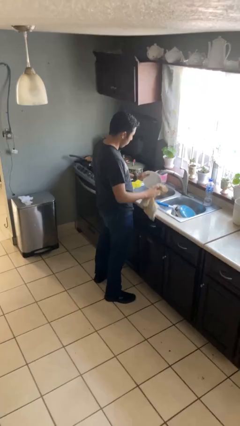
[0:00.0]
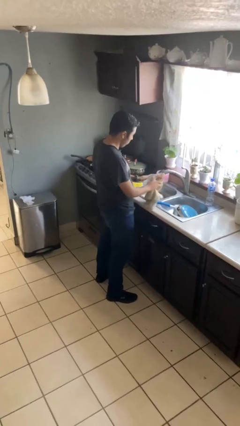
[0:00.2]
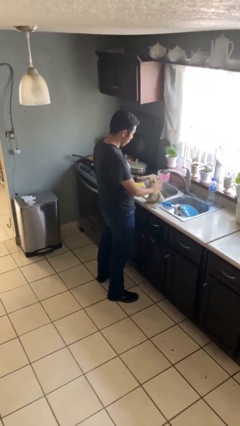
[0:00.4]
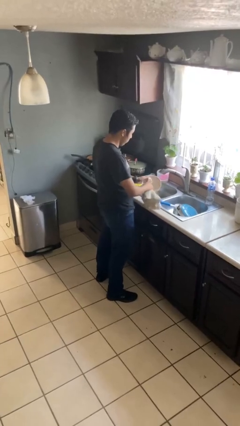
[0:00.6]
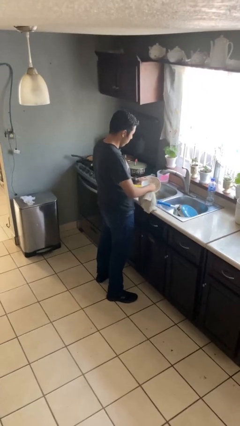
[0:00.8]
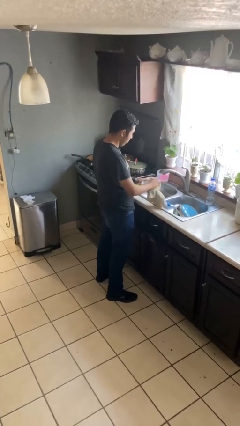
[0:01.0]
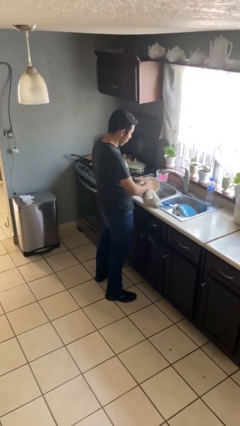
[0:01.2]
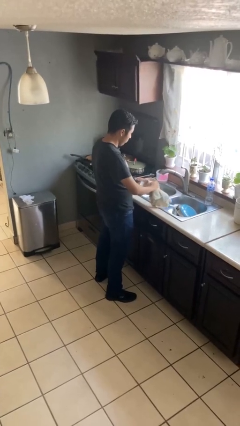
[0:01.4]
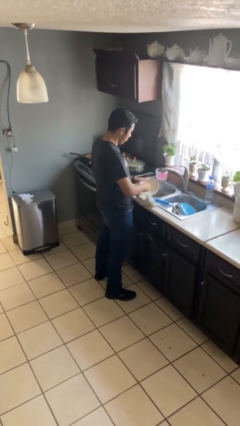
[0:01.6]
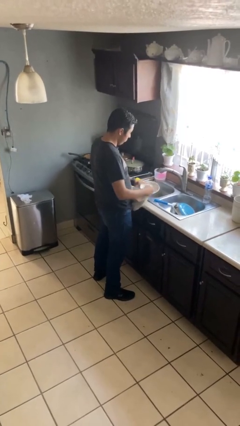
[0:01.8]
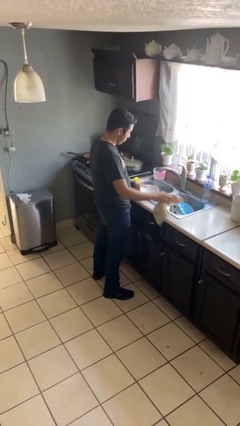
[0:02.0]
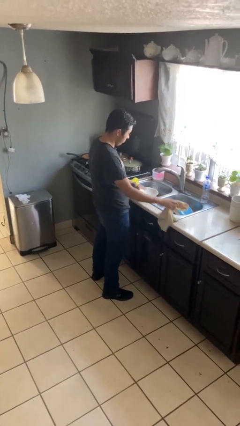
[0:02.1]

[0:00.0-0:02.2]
person dries dish

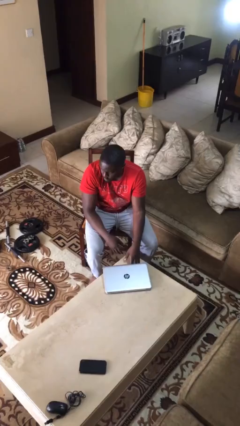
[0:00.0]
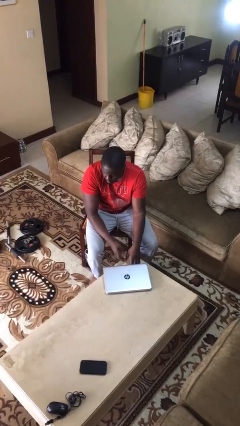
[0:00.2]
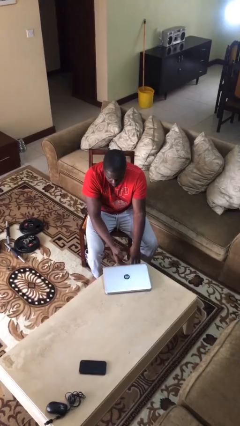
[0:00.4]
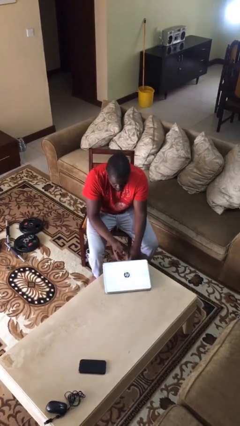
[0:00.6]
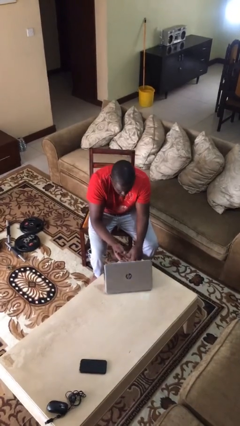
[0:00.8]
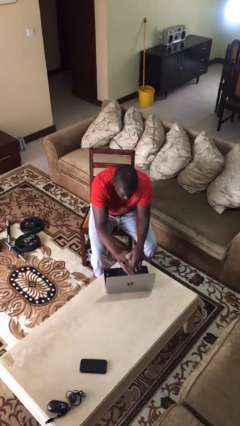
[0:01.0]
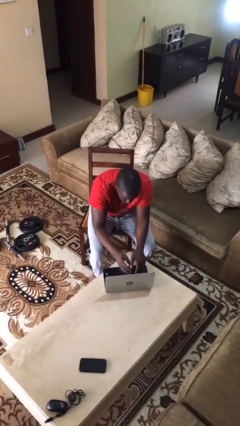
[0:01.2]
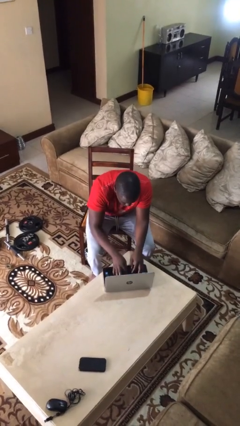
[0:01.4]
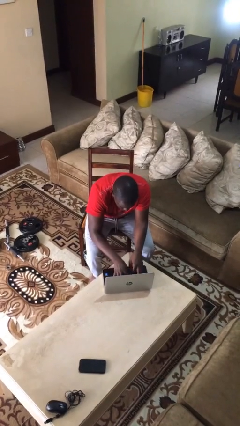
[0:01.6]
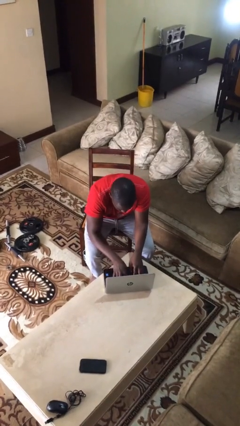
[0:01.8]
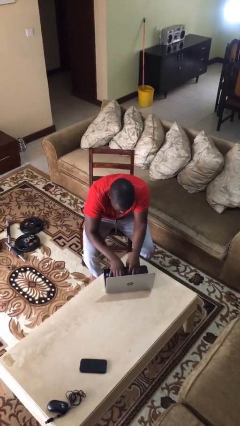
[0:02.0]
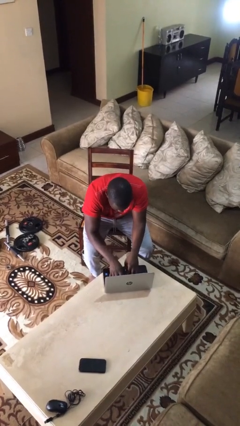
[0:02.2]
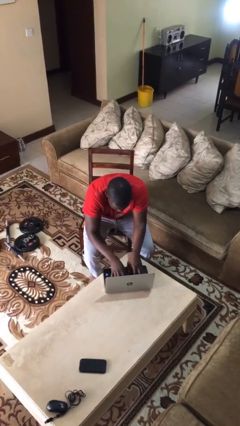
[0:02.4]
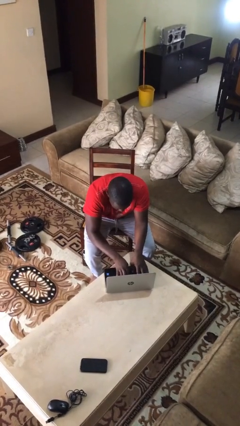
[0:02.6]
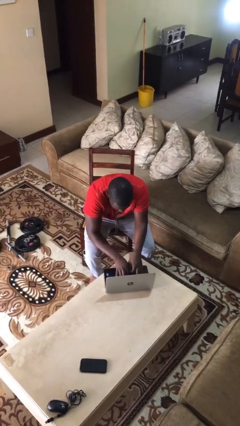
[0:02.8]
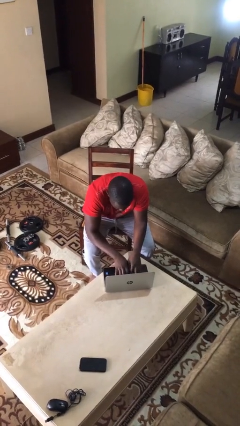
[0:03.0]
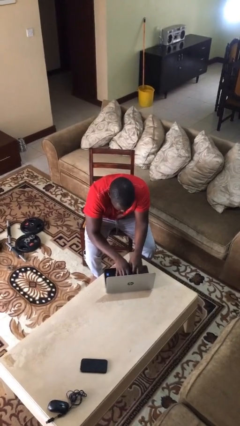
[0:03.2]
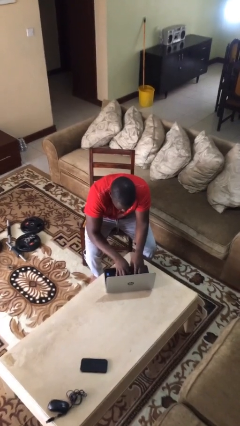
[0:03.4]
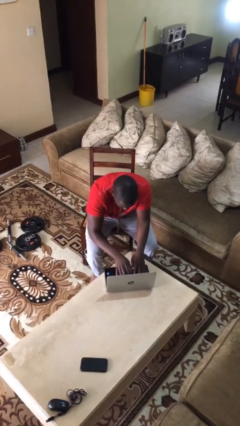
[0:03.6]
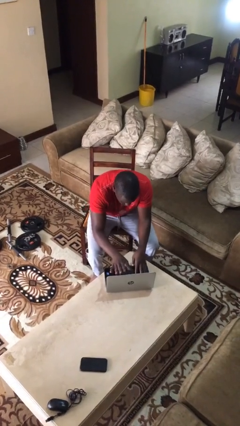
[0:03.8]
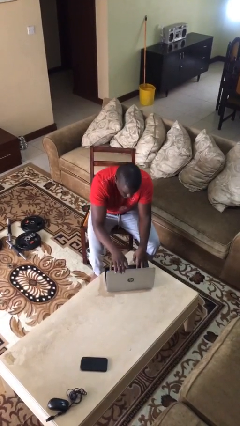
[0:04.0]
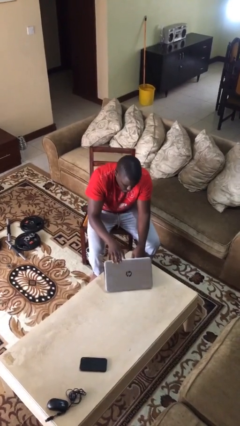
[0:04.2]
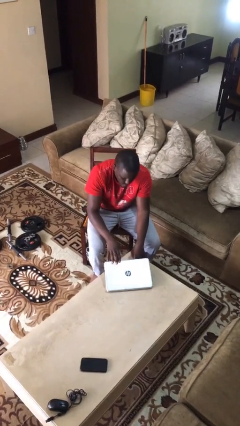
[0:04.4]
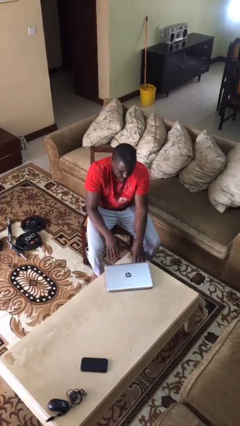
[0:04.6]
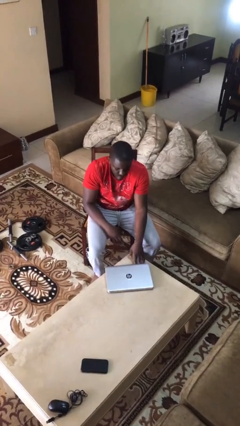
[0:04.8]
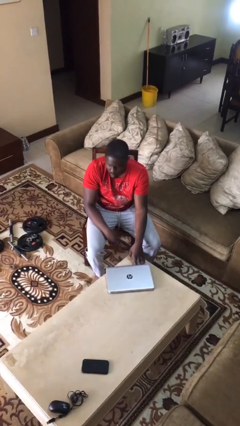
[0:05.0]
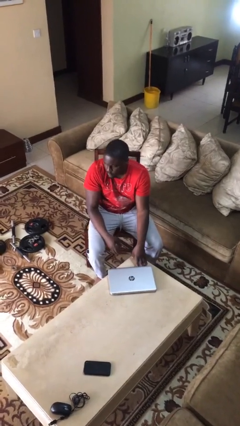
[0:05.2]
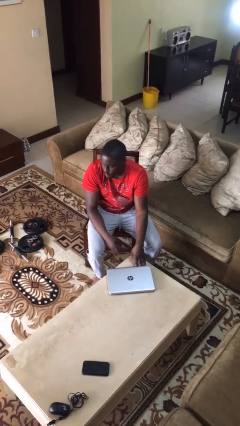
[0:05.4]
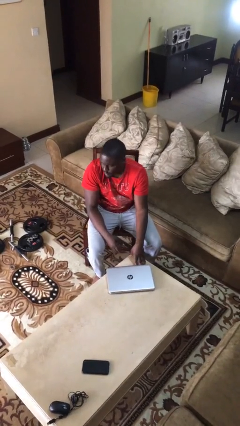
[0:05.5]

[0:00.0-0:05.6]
person interacts with laptop

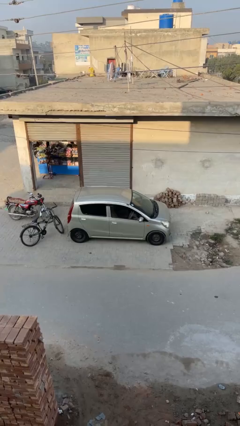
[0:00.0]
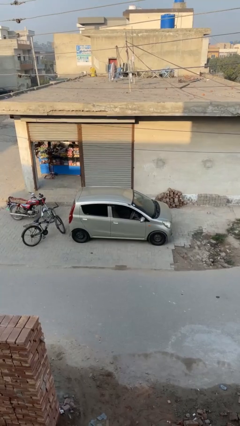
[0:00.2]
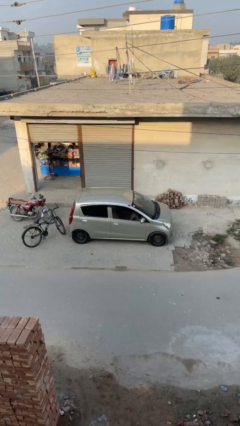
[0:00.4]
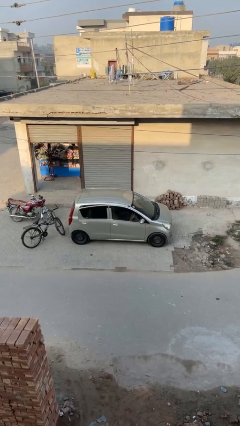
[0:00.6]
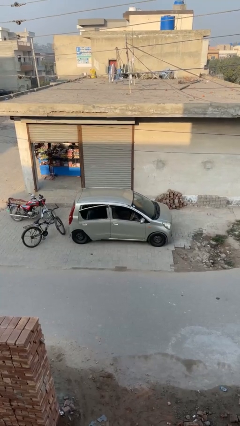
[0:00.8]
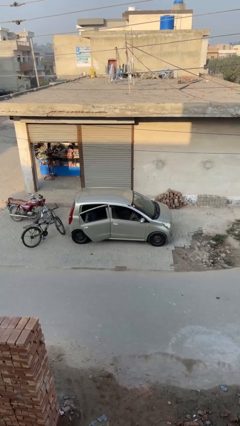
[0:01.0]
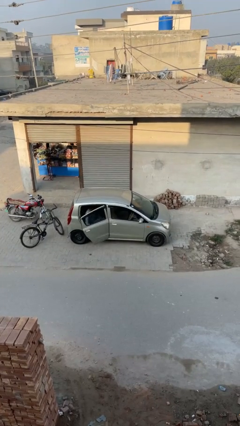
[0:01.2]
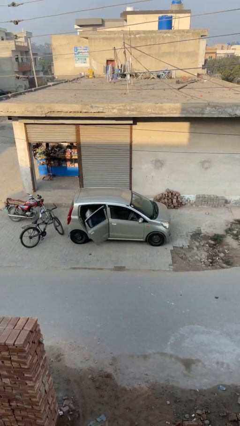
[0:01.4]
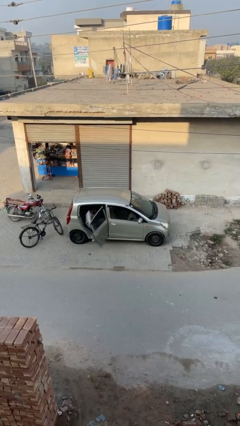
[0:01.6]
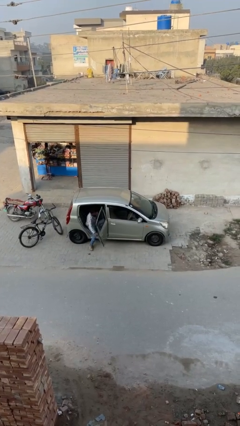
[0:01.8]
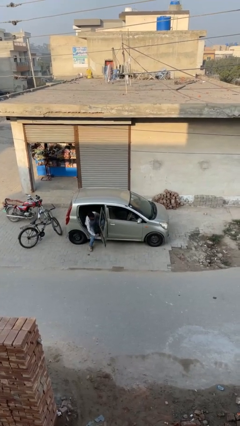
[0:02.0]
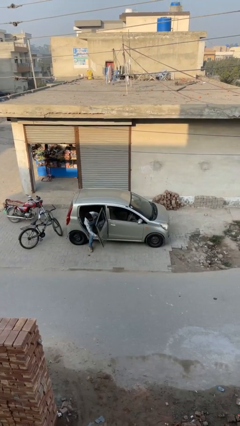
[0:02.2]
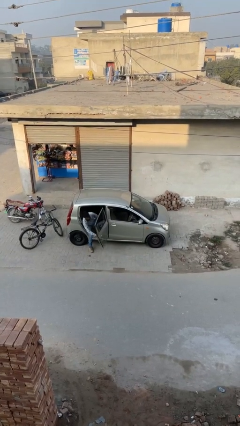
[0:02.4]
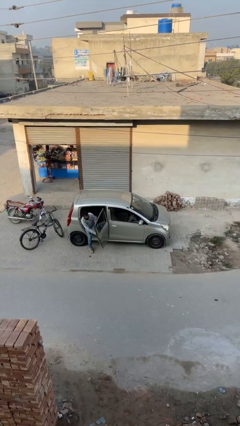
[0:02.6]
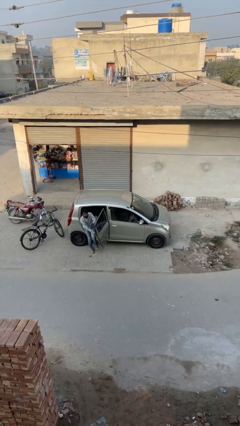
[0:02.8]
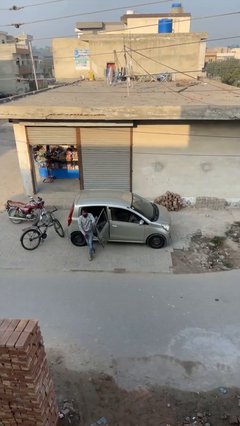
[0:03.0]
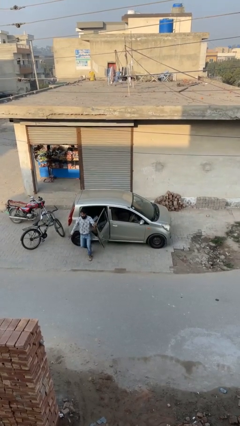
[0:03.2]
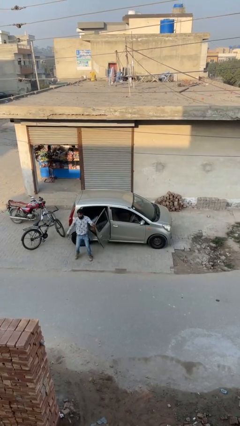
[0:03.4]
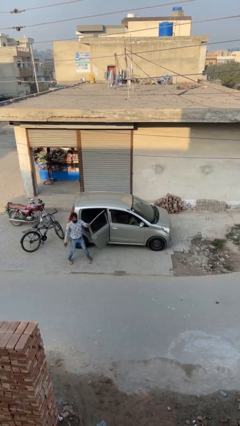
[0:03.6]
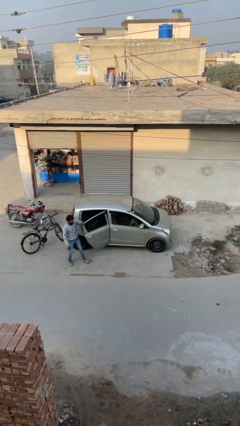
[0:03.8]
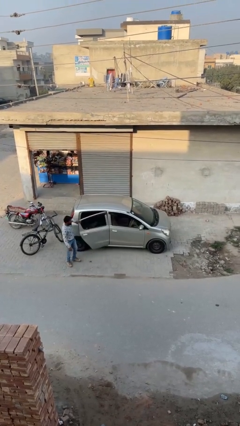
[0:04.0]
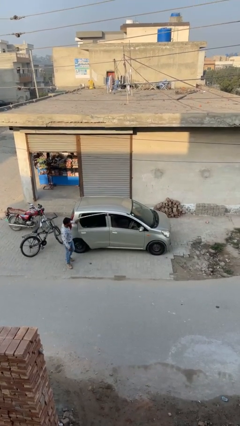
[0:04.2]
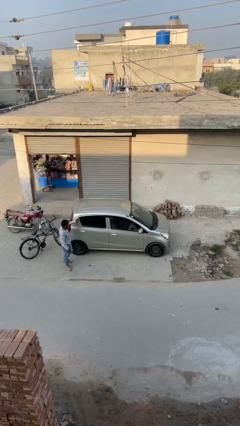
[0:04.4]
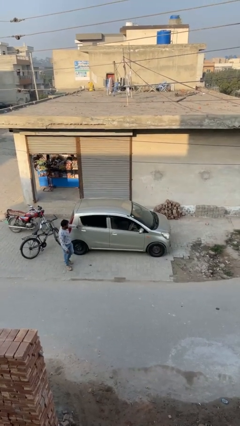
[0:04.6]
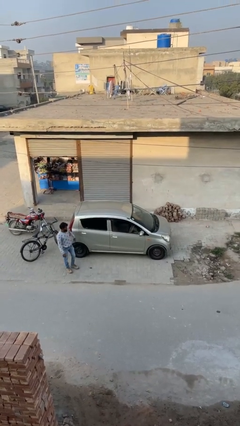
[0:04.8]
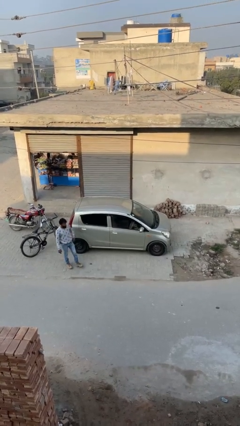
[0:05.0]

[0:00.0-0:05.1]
car drops off person

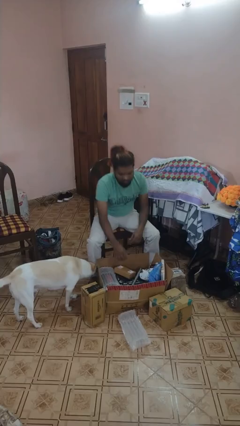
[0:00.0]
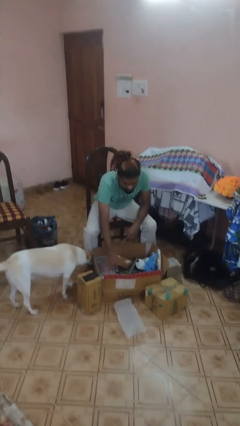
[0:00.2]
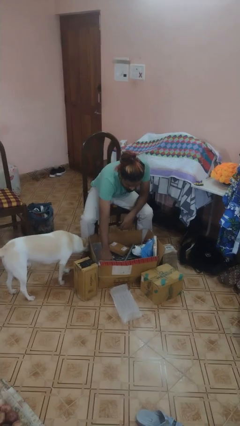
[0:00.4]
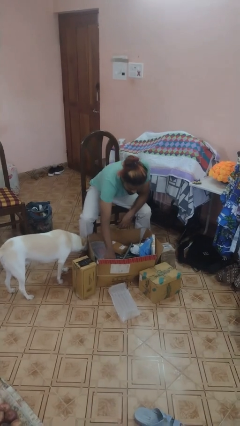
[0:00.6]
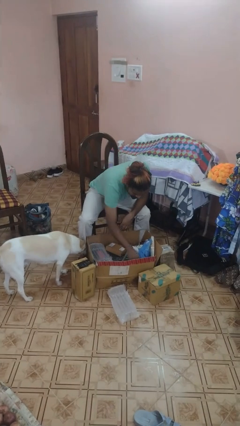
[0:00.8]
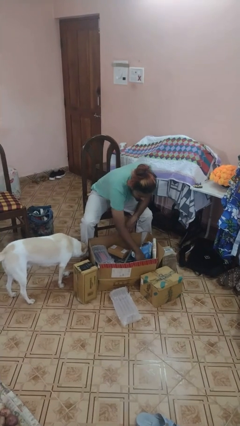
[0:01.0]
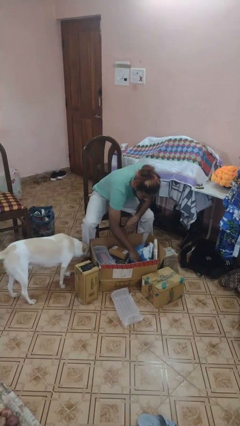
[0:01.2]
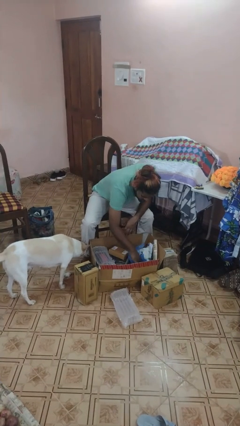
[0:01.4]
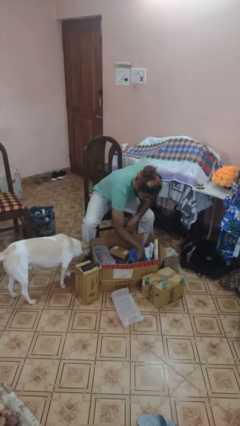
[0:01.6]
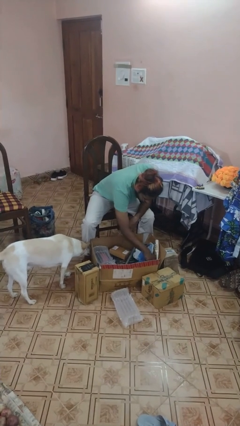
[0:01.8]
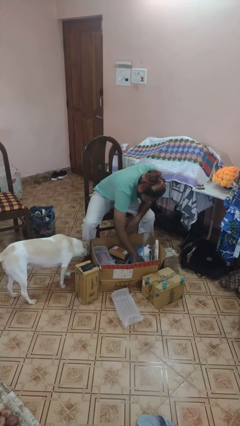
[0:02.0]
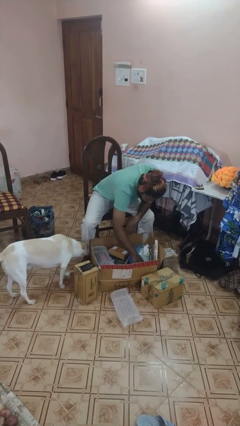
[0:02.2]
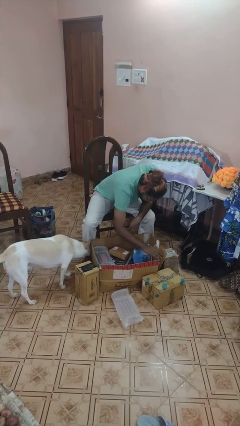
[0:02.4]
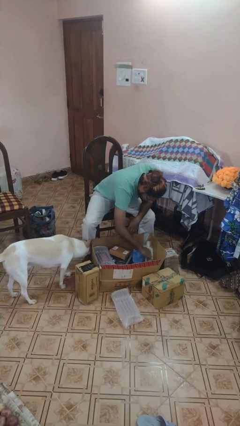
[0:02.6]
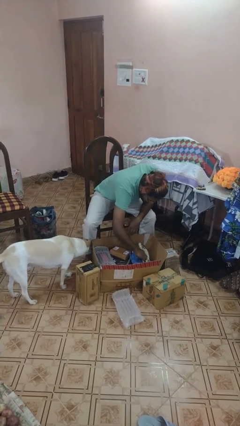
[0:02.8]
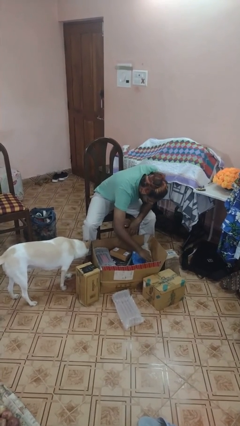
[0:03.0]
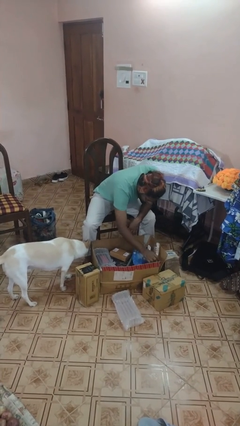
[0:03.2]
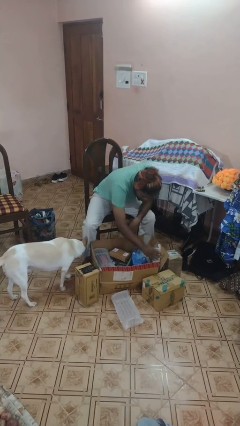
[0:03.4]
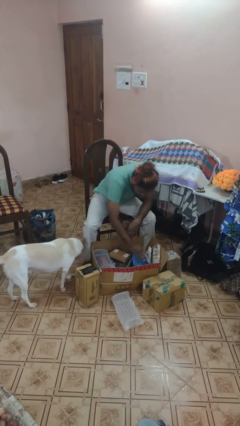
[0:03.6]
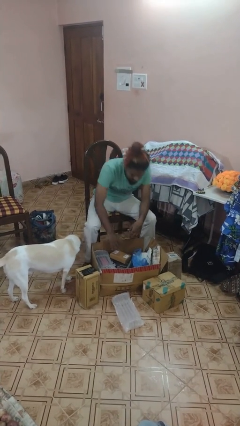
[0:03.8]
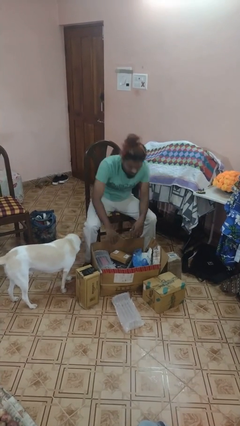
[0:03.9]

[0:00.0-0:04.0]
person searches in box

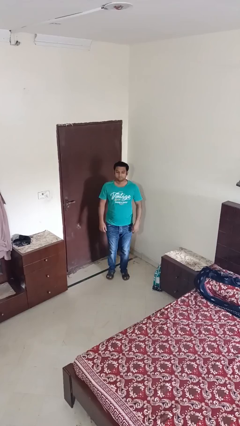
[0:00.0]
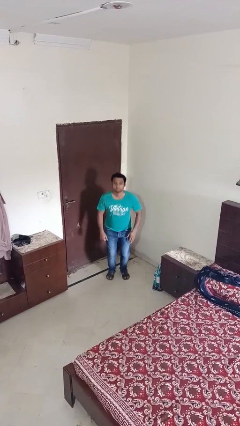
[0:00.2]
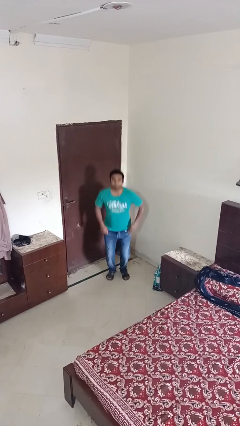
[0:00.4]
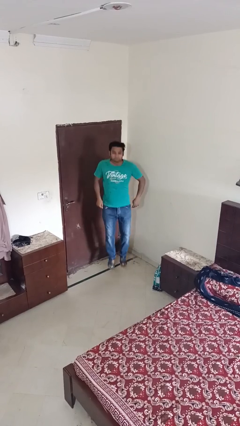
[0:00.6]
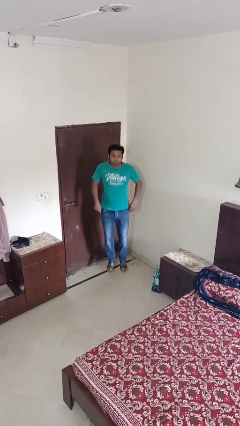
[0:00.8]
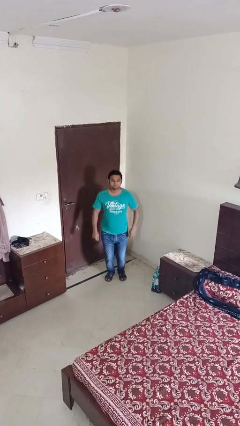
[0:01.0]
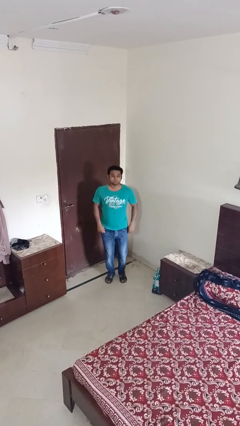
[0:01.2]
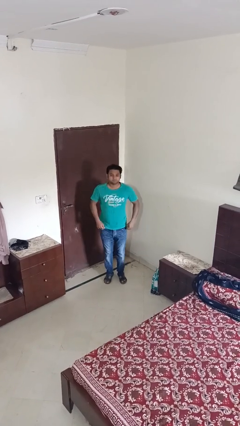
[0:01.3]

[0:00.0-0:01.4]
person jumps
